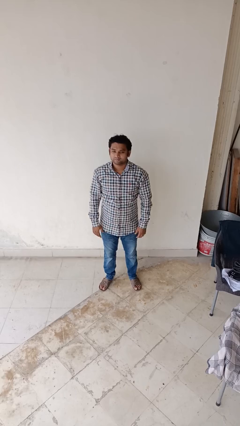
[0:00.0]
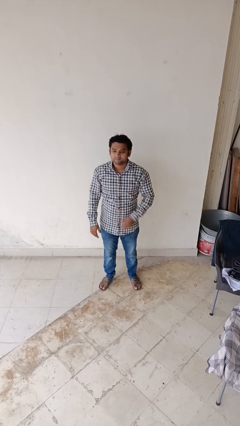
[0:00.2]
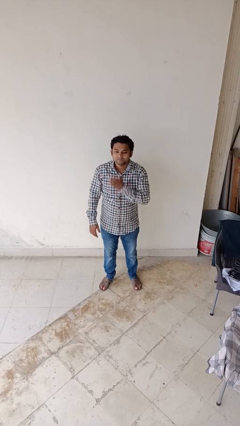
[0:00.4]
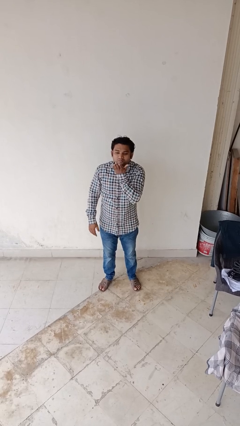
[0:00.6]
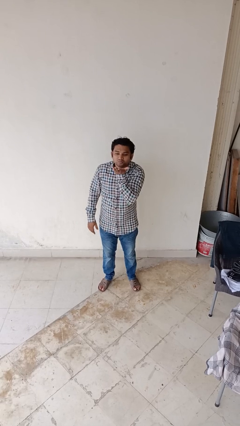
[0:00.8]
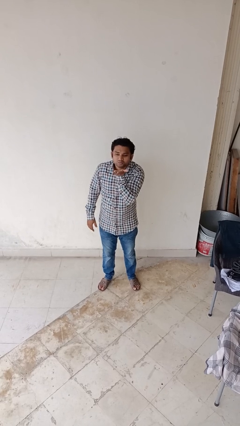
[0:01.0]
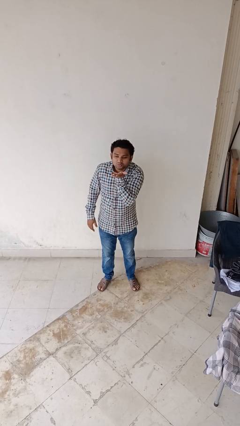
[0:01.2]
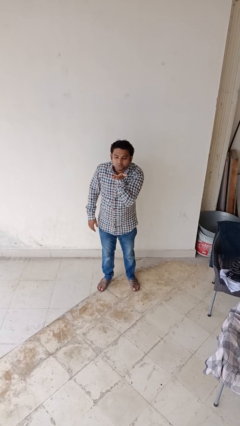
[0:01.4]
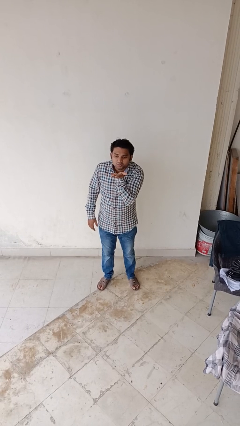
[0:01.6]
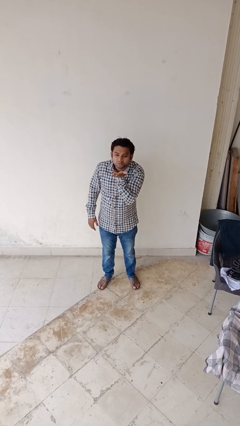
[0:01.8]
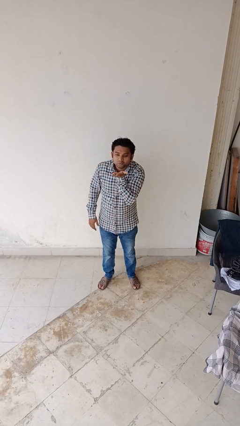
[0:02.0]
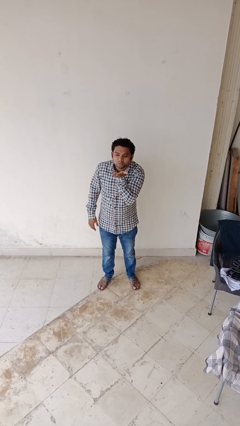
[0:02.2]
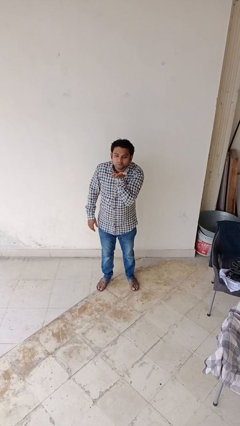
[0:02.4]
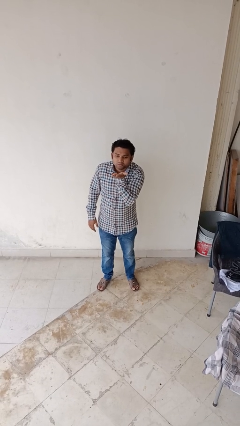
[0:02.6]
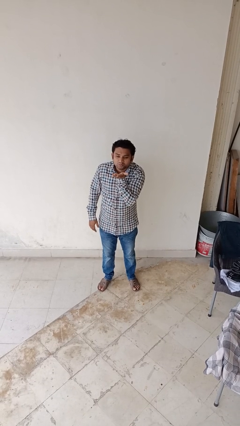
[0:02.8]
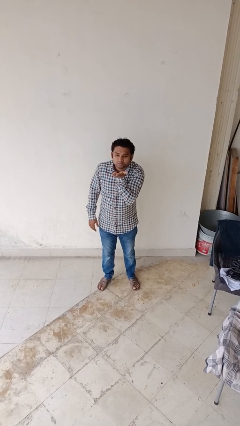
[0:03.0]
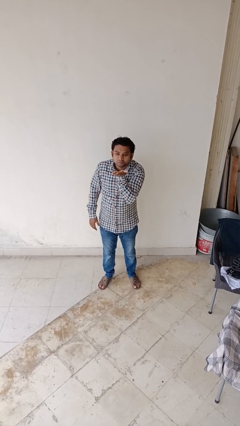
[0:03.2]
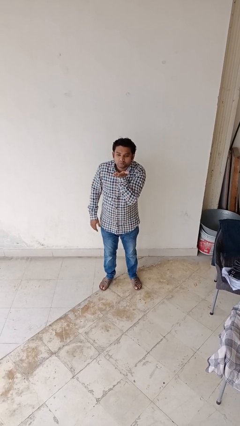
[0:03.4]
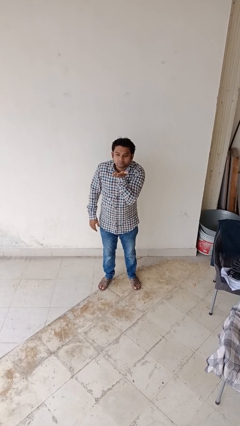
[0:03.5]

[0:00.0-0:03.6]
person gestures blow kiss

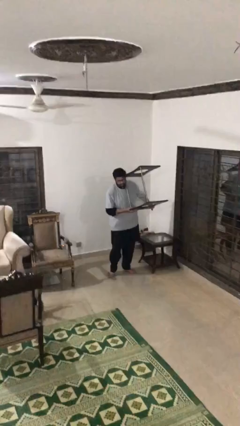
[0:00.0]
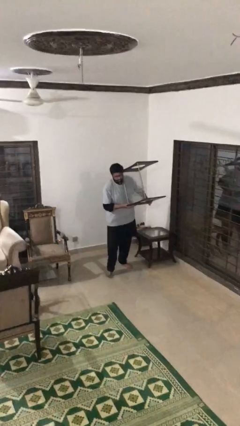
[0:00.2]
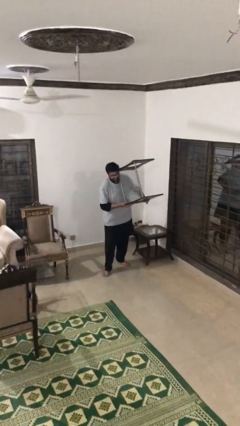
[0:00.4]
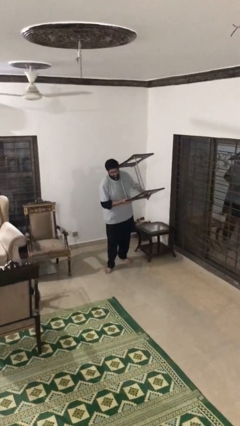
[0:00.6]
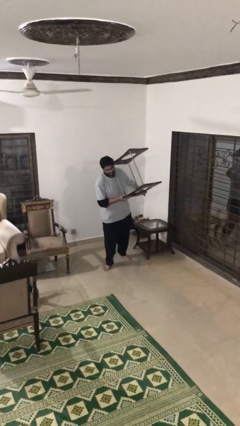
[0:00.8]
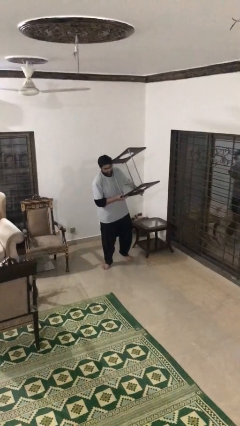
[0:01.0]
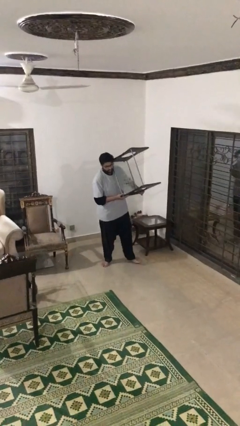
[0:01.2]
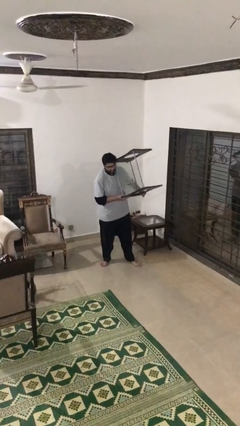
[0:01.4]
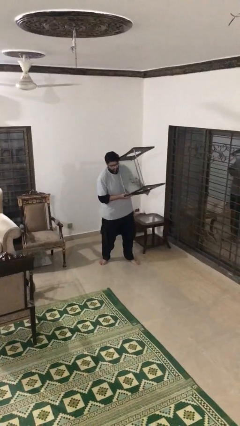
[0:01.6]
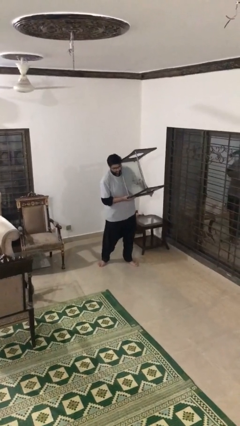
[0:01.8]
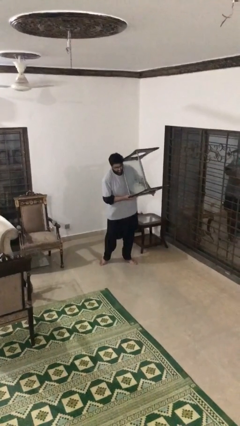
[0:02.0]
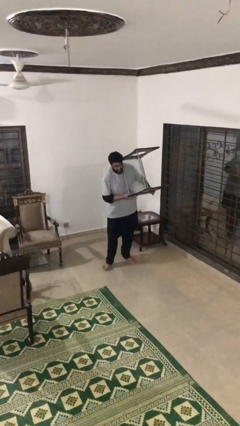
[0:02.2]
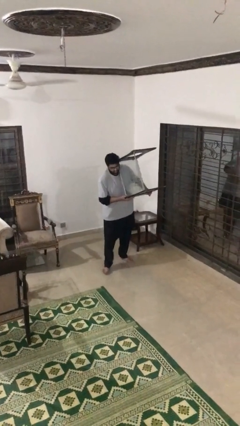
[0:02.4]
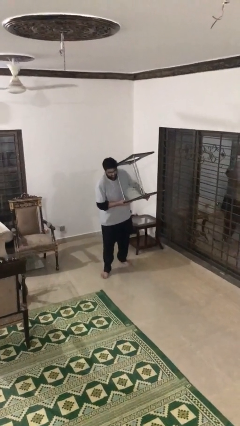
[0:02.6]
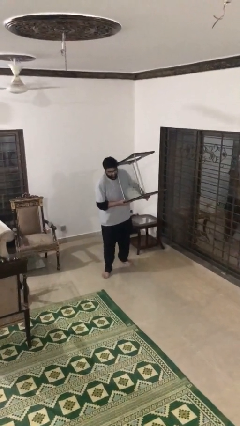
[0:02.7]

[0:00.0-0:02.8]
person carries heavy object

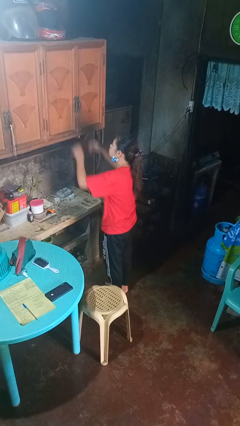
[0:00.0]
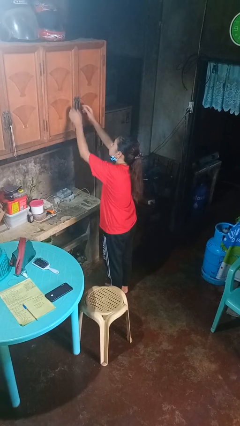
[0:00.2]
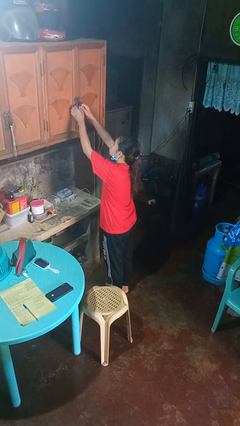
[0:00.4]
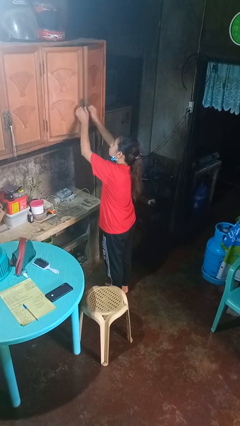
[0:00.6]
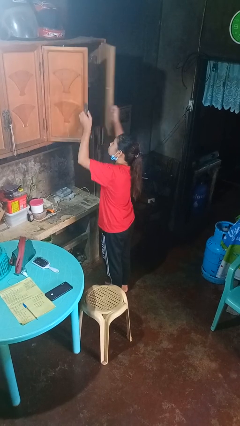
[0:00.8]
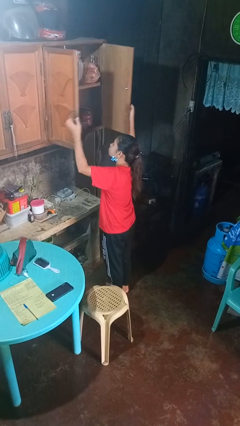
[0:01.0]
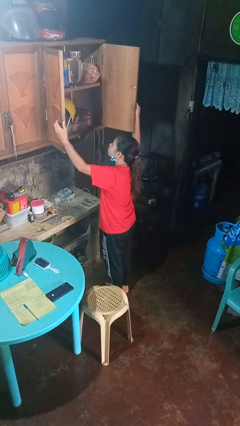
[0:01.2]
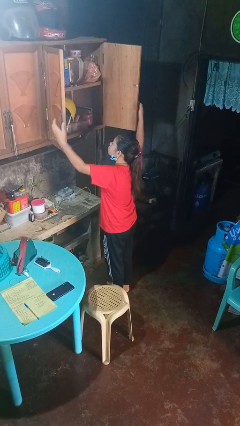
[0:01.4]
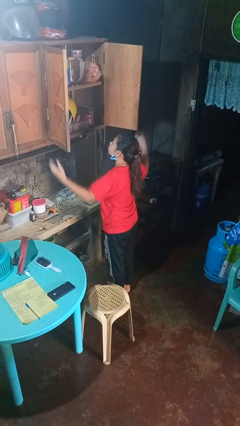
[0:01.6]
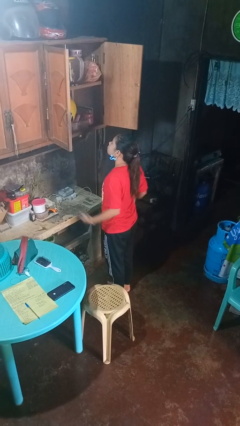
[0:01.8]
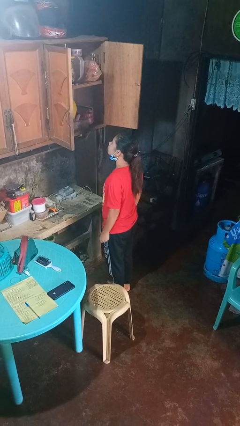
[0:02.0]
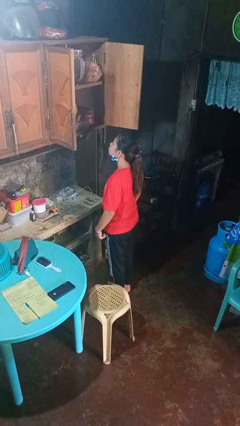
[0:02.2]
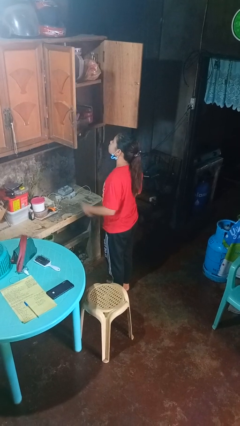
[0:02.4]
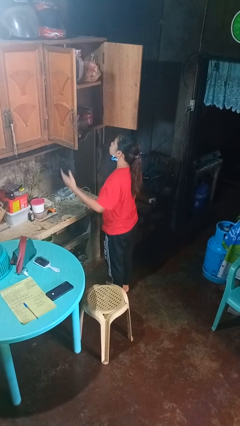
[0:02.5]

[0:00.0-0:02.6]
person opens cabinet

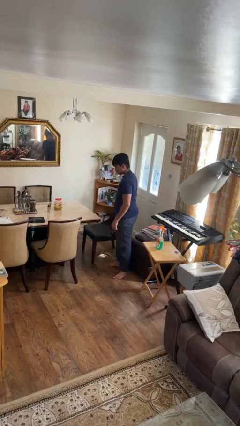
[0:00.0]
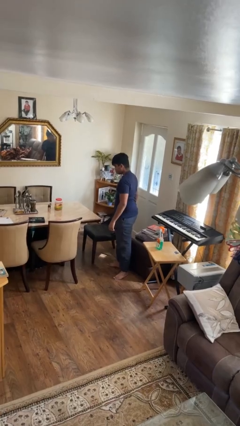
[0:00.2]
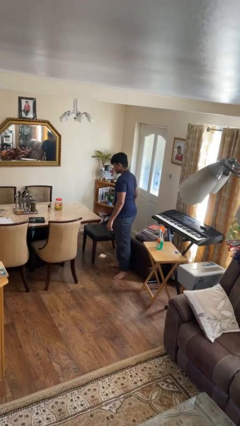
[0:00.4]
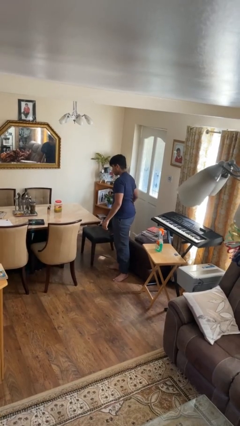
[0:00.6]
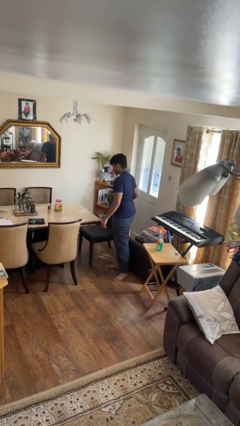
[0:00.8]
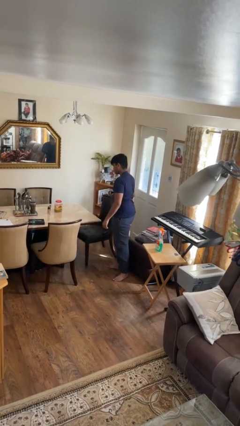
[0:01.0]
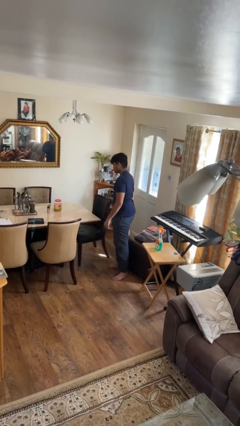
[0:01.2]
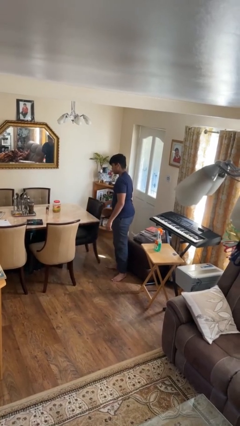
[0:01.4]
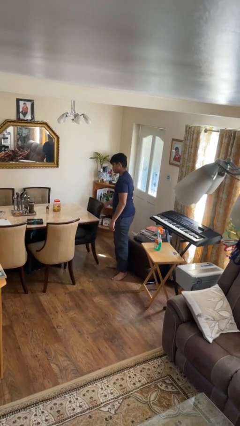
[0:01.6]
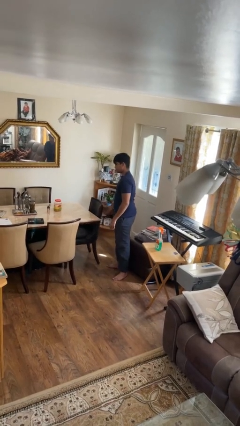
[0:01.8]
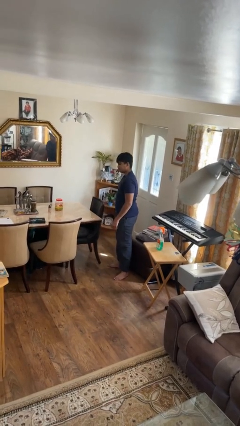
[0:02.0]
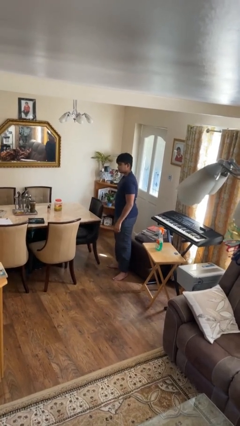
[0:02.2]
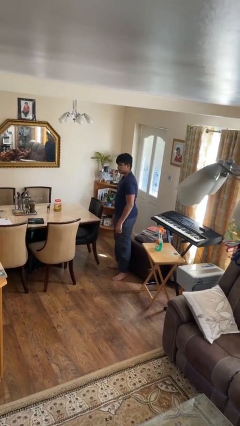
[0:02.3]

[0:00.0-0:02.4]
person pushes in chair

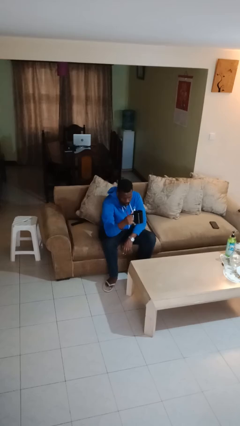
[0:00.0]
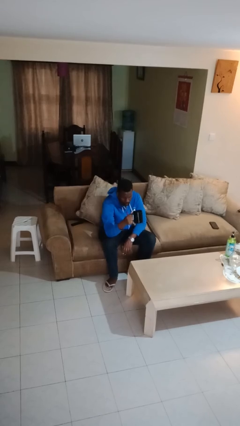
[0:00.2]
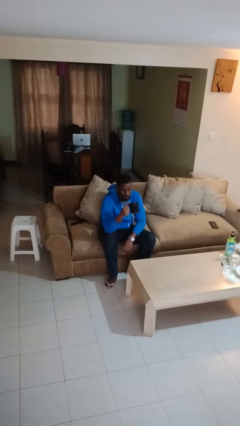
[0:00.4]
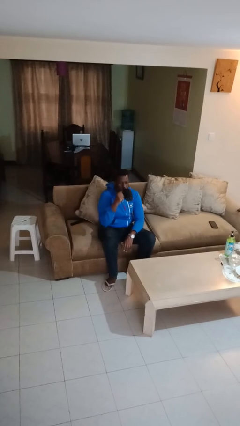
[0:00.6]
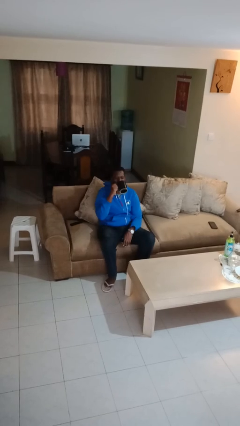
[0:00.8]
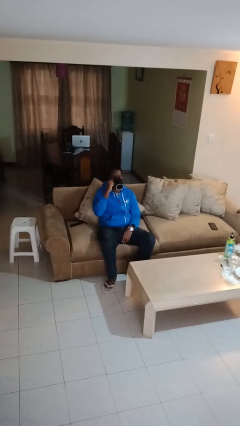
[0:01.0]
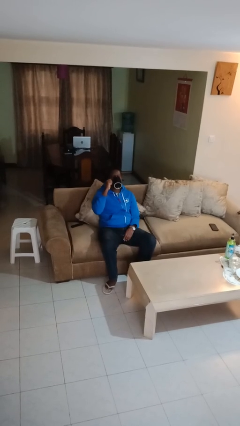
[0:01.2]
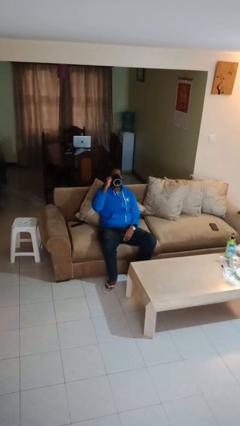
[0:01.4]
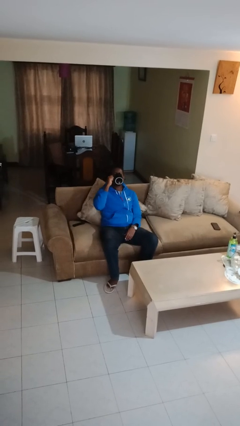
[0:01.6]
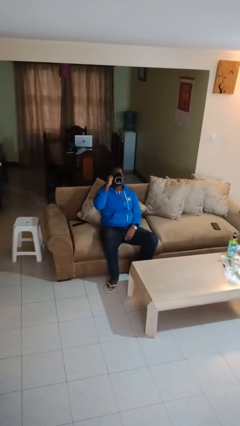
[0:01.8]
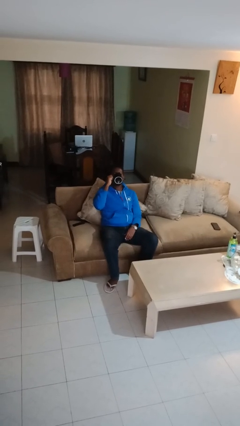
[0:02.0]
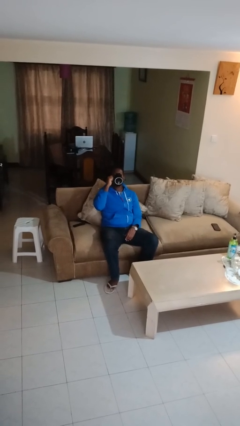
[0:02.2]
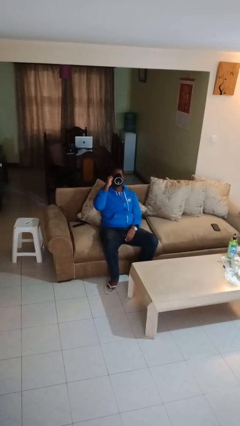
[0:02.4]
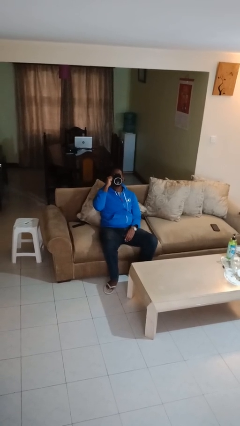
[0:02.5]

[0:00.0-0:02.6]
person drinks from mug

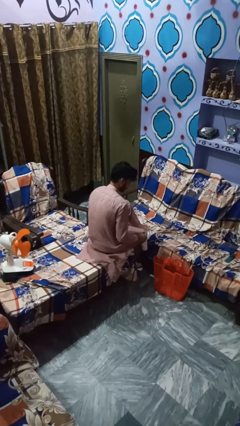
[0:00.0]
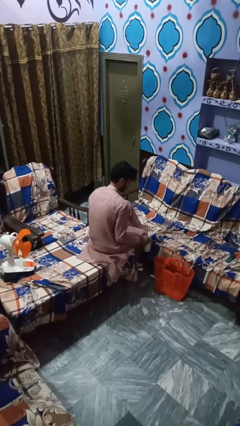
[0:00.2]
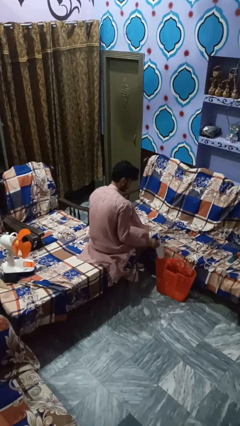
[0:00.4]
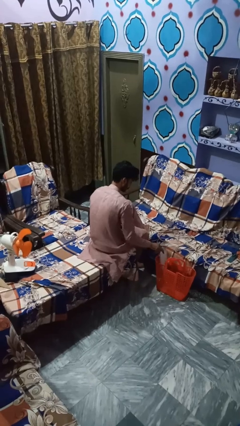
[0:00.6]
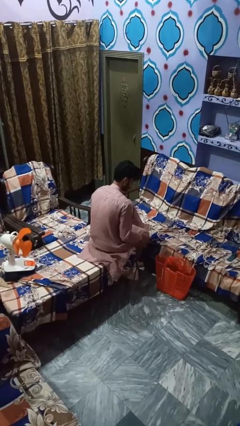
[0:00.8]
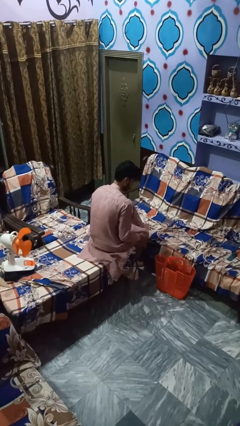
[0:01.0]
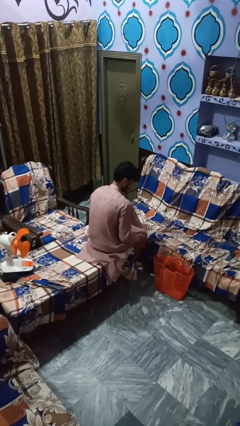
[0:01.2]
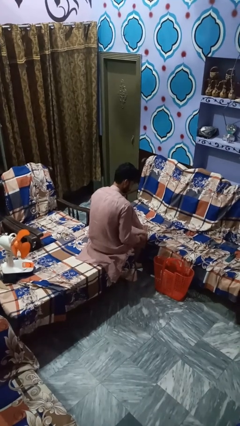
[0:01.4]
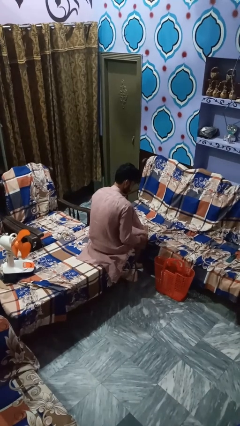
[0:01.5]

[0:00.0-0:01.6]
person discards trash

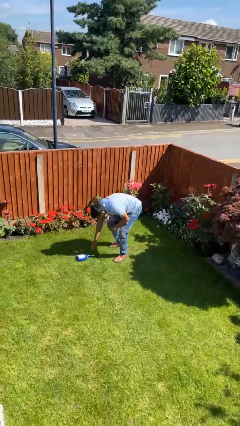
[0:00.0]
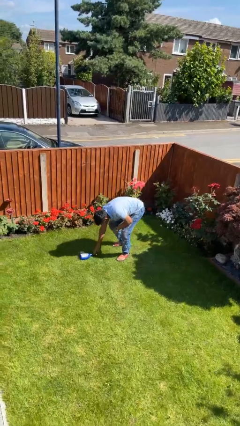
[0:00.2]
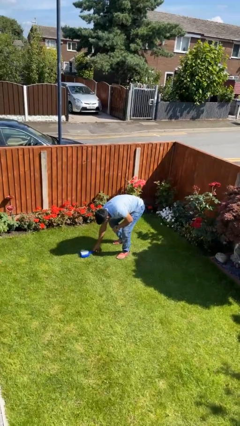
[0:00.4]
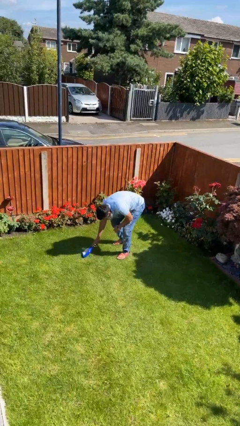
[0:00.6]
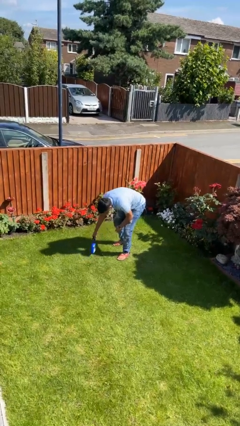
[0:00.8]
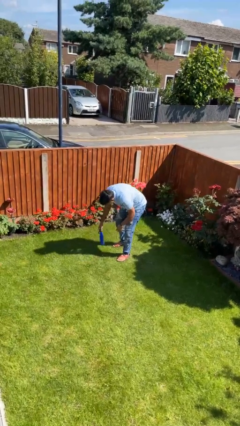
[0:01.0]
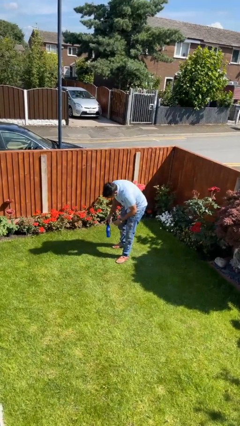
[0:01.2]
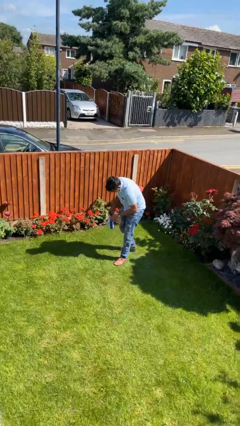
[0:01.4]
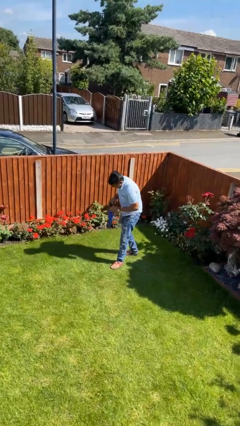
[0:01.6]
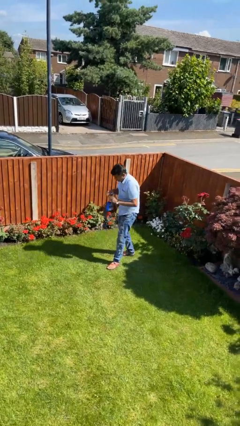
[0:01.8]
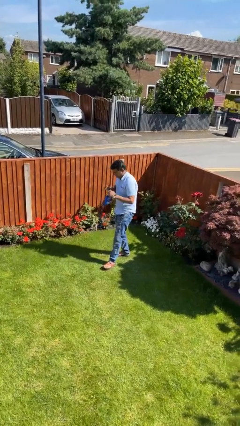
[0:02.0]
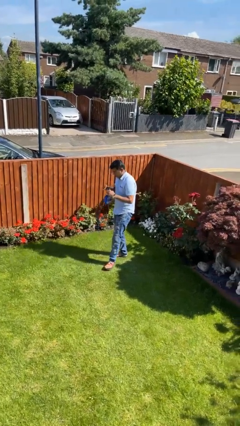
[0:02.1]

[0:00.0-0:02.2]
person picks up object from floor
